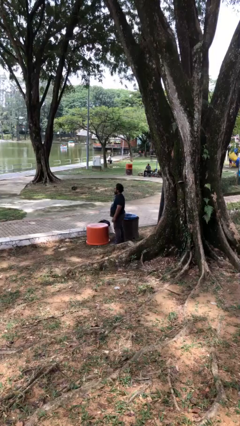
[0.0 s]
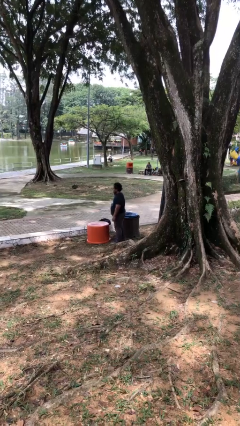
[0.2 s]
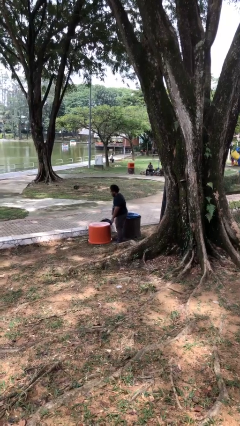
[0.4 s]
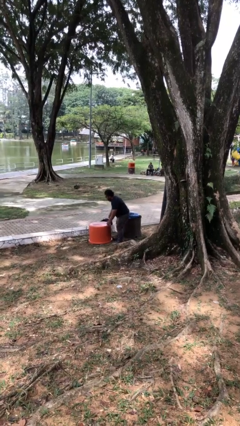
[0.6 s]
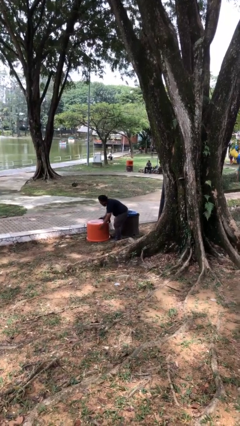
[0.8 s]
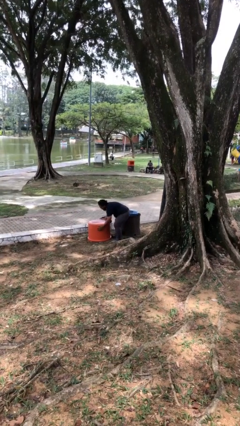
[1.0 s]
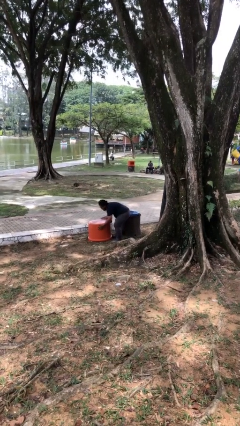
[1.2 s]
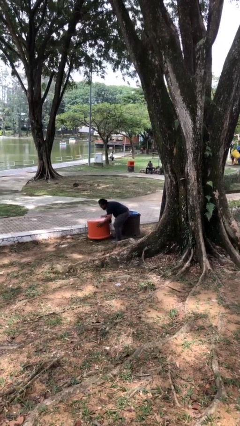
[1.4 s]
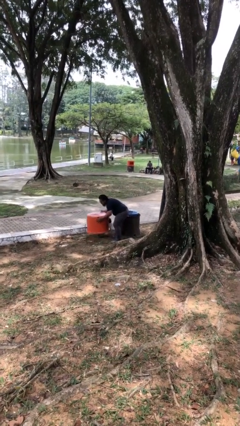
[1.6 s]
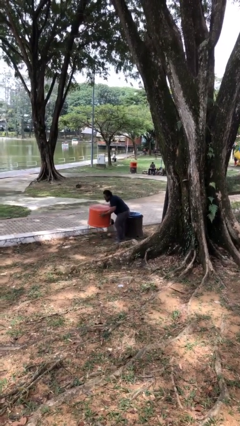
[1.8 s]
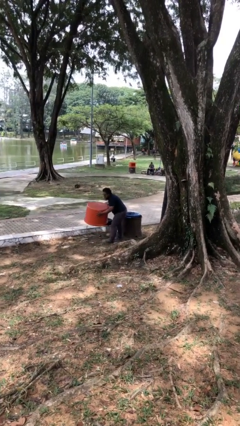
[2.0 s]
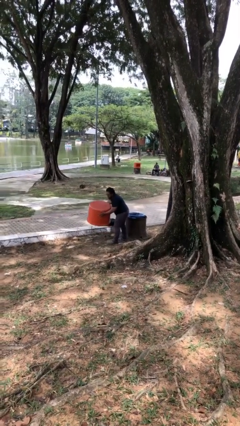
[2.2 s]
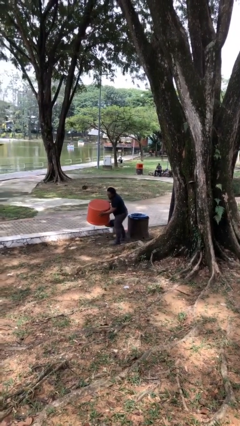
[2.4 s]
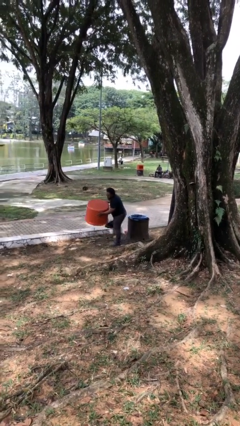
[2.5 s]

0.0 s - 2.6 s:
person picks up object from floor

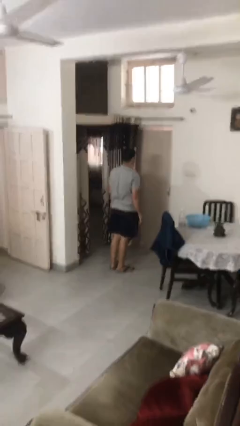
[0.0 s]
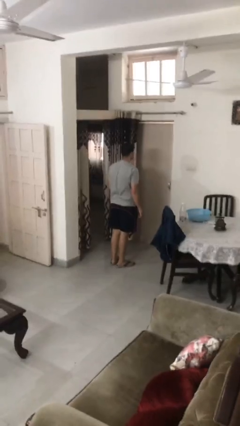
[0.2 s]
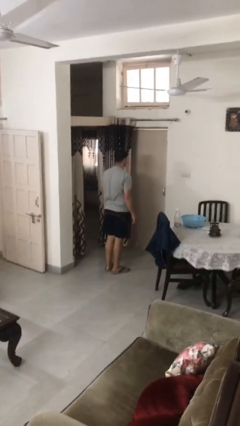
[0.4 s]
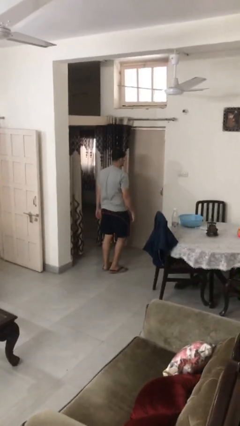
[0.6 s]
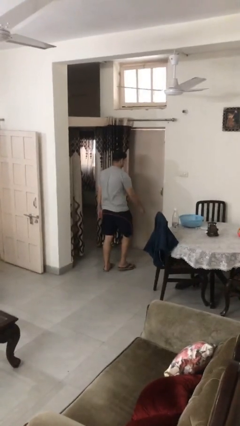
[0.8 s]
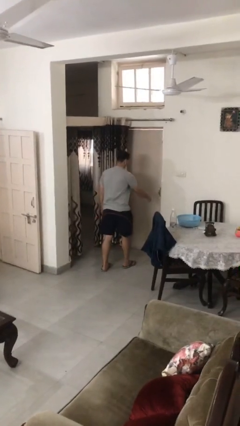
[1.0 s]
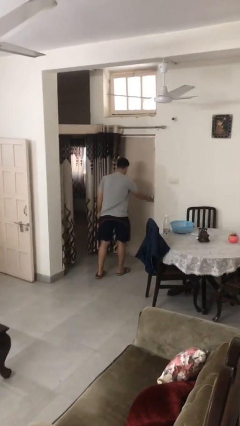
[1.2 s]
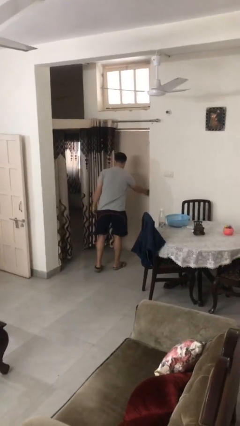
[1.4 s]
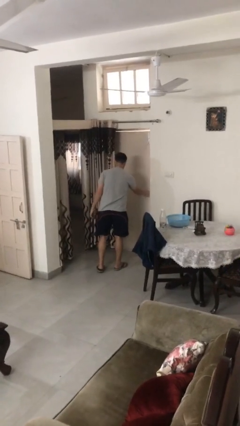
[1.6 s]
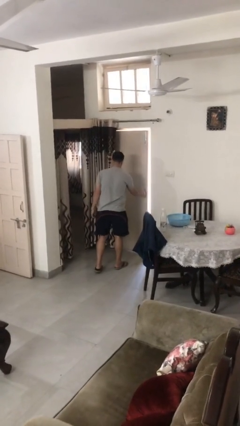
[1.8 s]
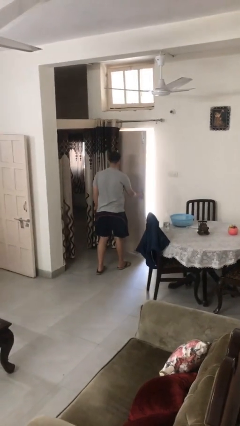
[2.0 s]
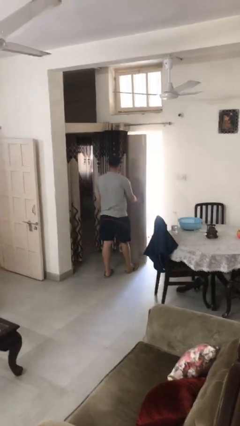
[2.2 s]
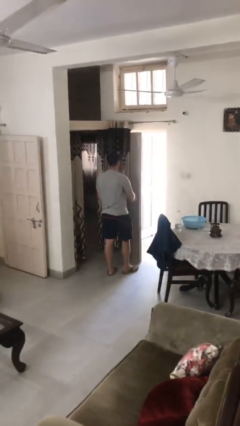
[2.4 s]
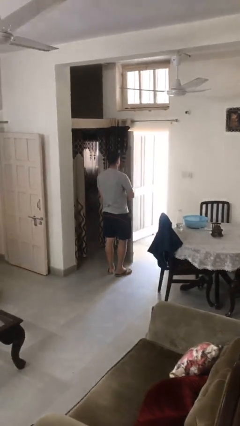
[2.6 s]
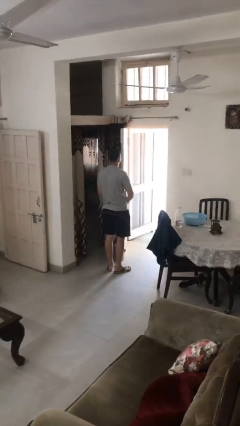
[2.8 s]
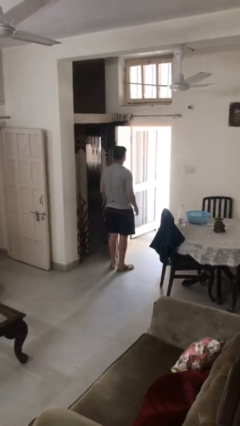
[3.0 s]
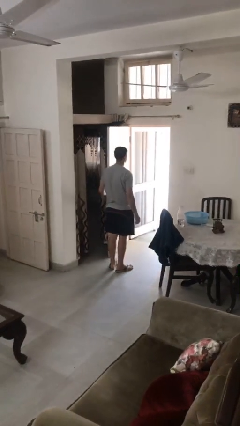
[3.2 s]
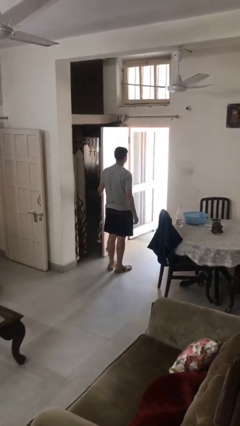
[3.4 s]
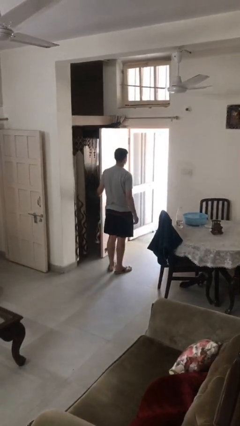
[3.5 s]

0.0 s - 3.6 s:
person opens facility door

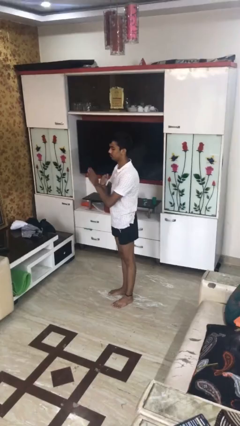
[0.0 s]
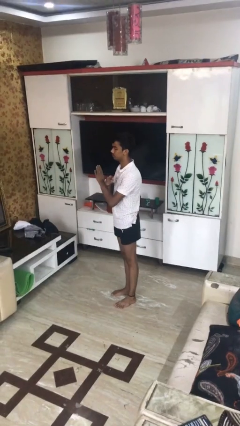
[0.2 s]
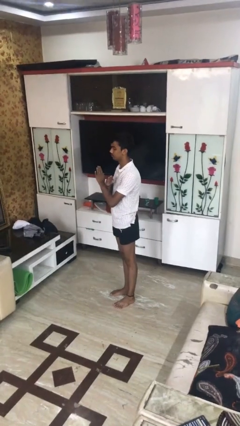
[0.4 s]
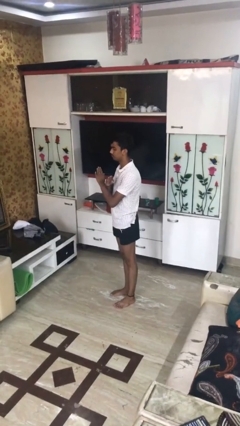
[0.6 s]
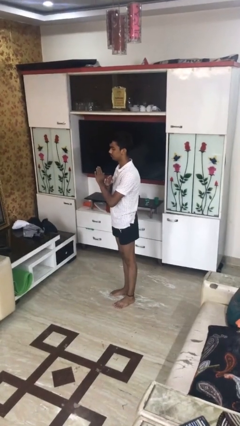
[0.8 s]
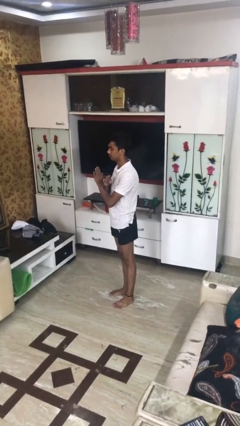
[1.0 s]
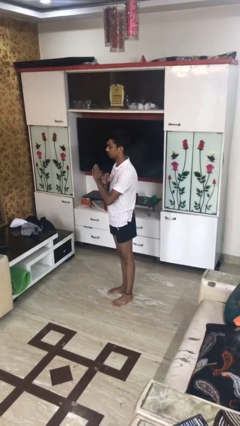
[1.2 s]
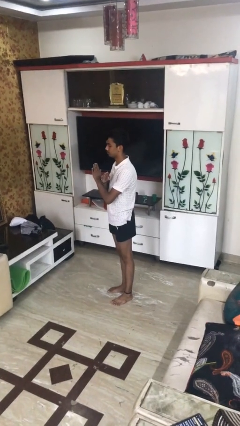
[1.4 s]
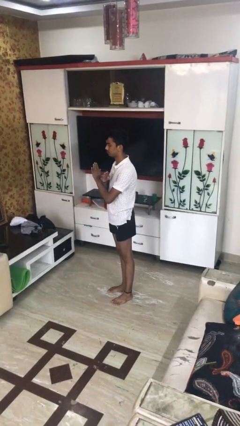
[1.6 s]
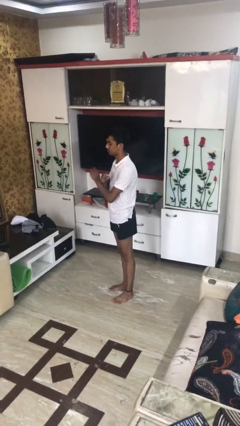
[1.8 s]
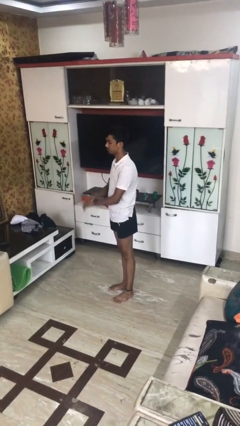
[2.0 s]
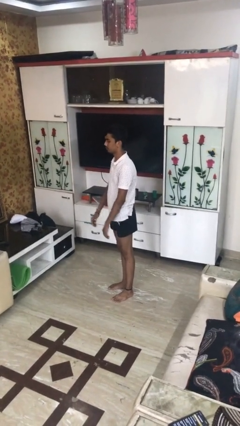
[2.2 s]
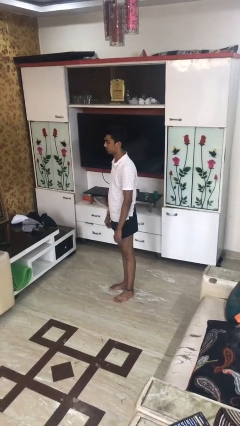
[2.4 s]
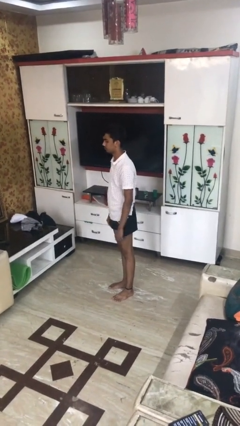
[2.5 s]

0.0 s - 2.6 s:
person gestures arms x

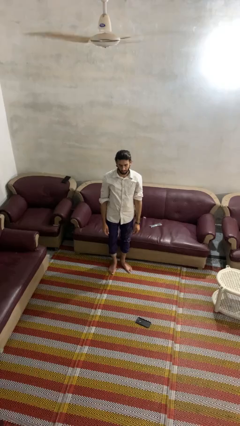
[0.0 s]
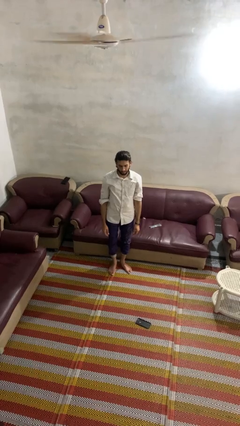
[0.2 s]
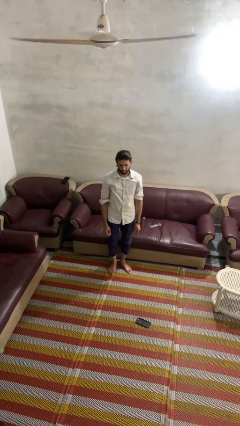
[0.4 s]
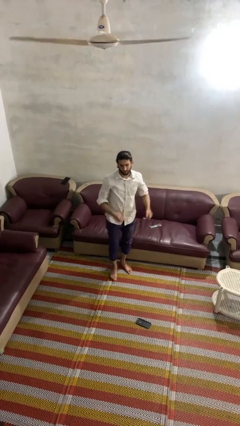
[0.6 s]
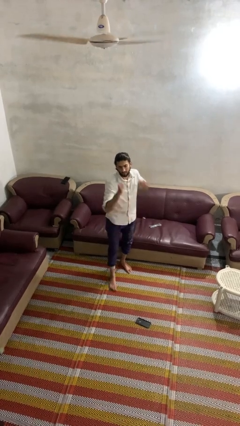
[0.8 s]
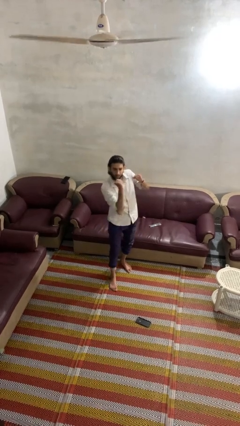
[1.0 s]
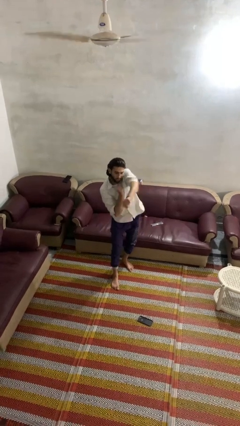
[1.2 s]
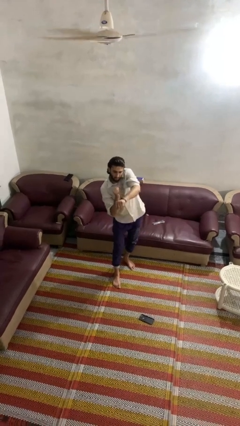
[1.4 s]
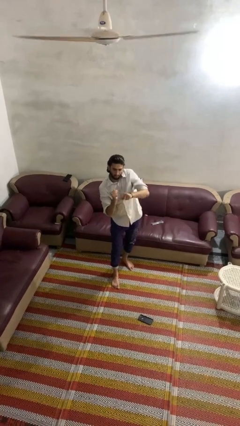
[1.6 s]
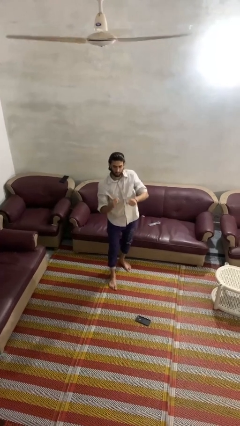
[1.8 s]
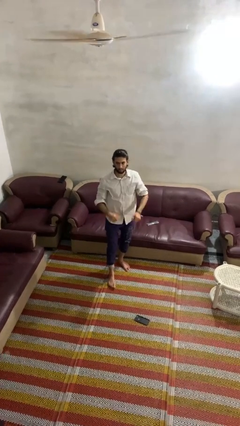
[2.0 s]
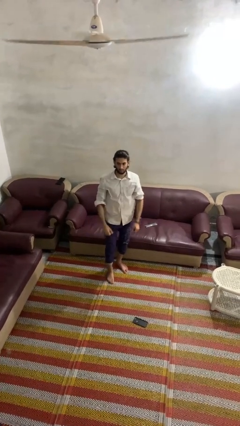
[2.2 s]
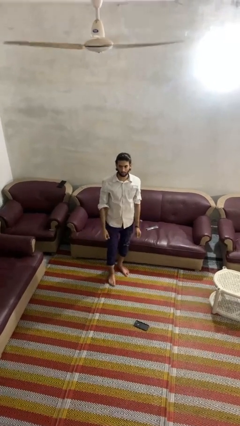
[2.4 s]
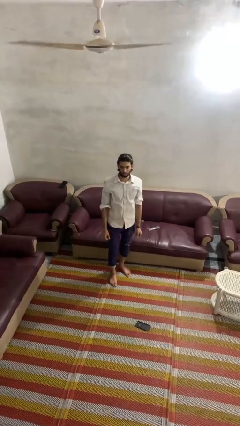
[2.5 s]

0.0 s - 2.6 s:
person punches

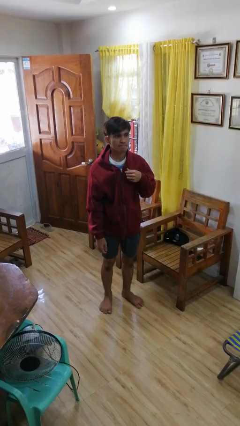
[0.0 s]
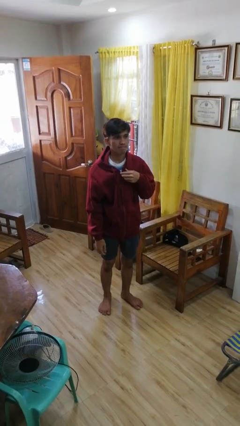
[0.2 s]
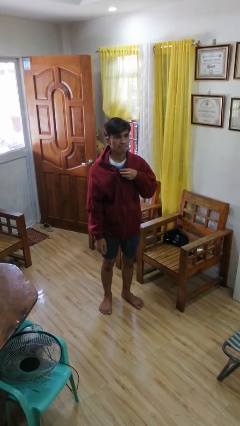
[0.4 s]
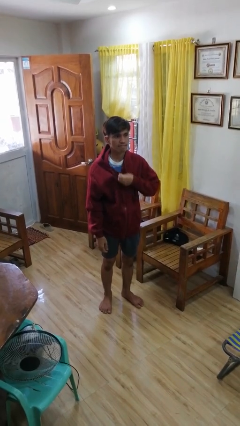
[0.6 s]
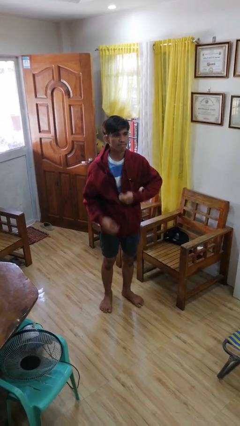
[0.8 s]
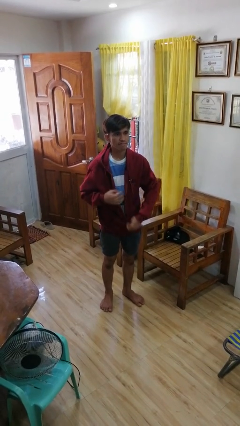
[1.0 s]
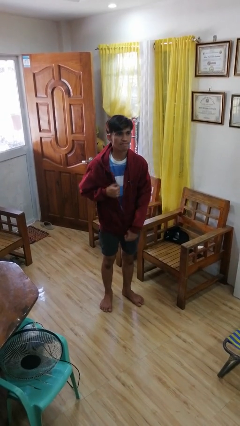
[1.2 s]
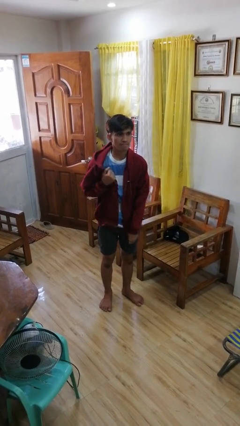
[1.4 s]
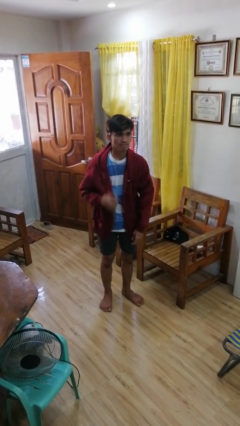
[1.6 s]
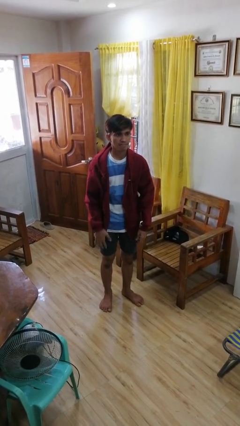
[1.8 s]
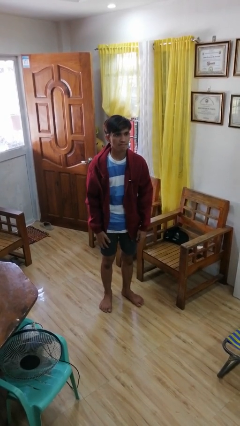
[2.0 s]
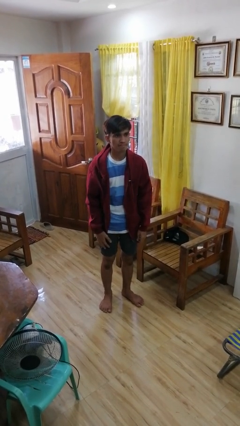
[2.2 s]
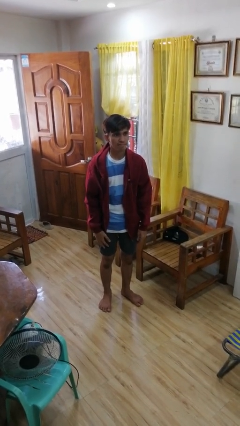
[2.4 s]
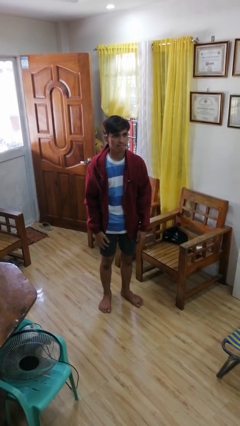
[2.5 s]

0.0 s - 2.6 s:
person unzips jacket

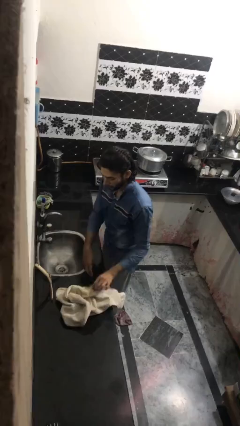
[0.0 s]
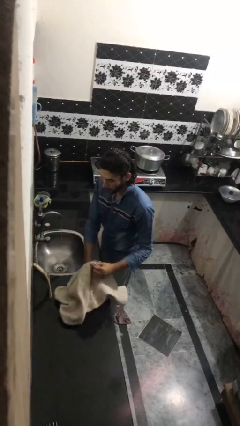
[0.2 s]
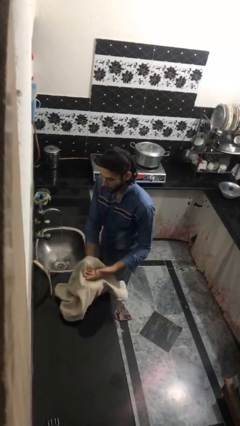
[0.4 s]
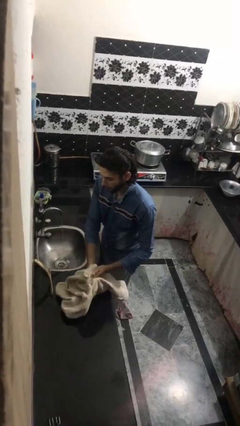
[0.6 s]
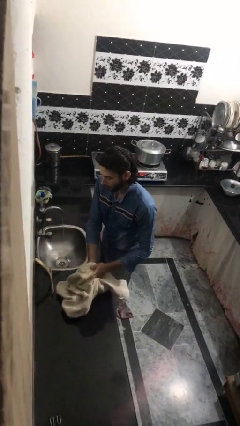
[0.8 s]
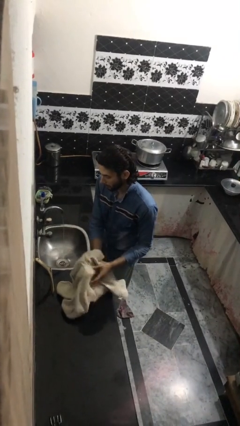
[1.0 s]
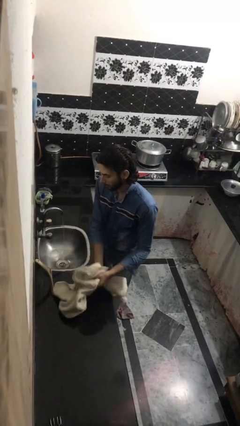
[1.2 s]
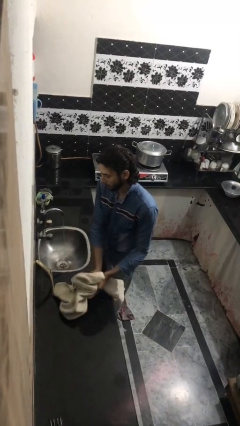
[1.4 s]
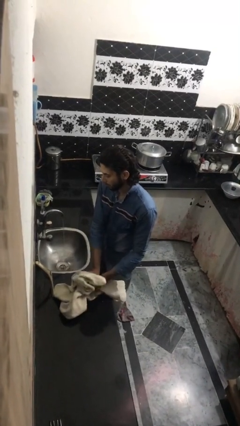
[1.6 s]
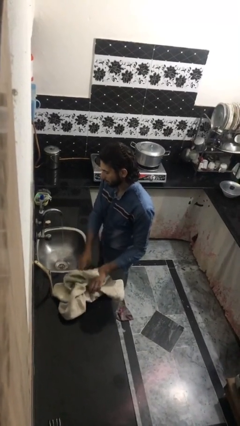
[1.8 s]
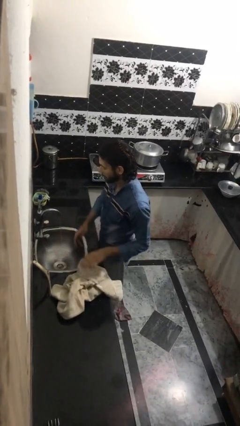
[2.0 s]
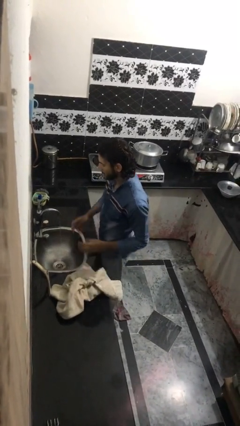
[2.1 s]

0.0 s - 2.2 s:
person dries hands with towel

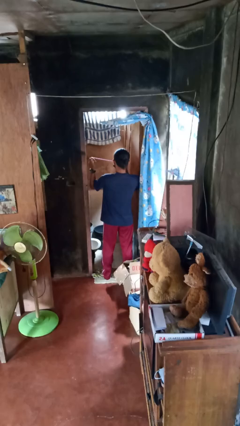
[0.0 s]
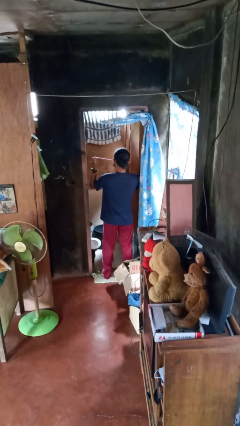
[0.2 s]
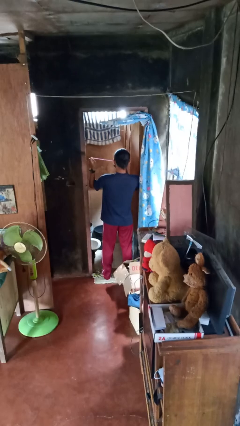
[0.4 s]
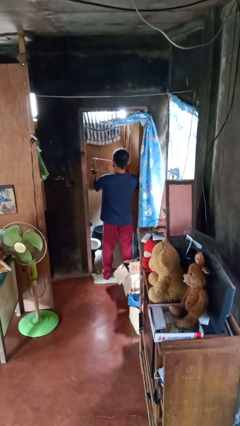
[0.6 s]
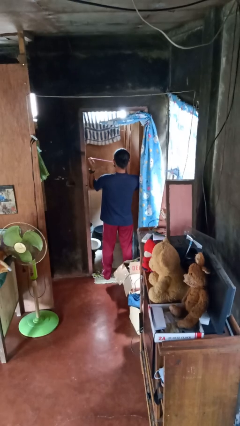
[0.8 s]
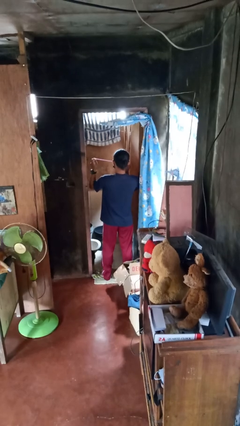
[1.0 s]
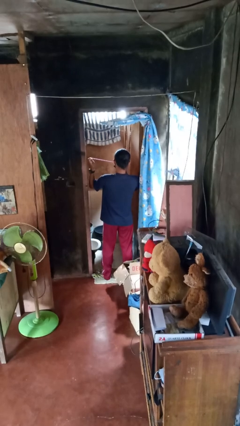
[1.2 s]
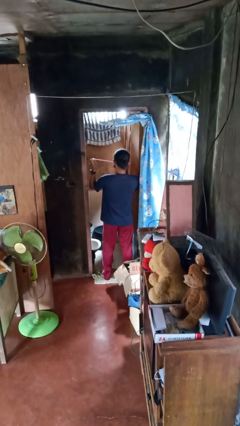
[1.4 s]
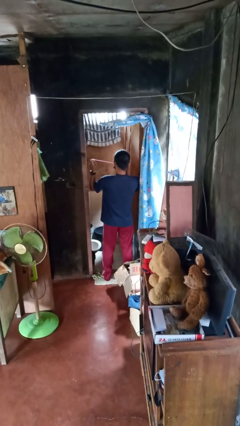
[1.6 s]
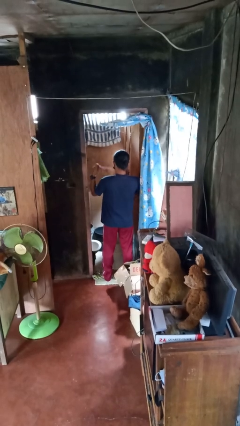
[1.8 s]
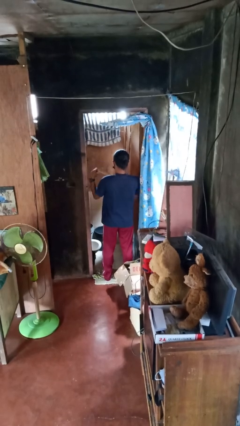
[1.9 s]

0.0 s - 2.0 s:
person flosses
